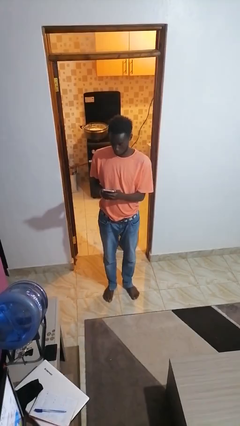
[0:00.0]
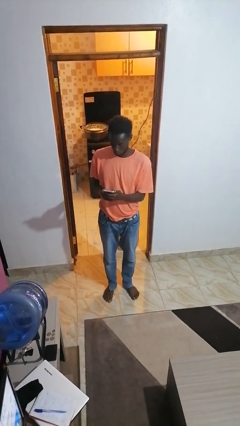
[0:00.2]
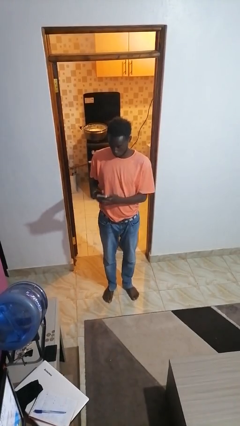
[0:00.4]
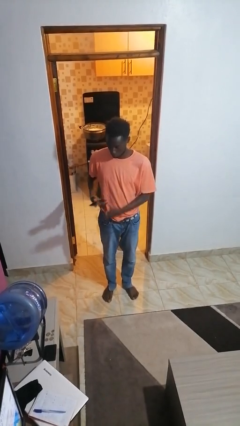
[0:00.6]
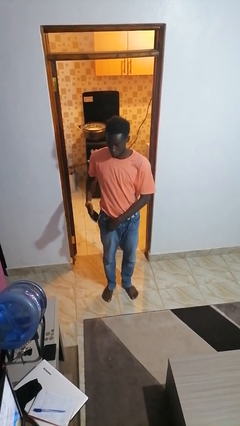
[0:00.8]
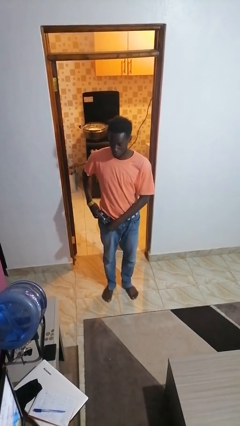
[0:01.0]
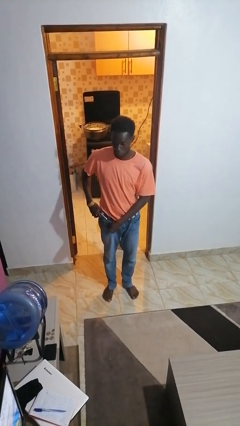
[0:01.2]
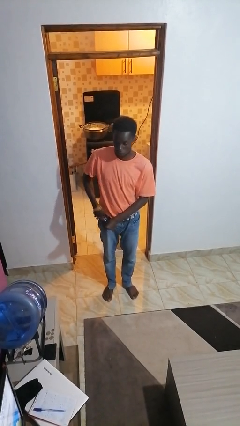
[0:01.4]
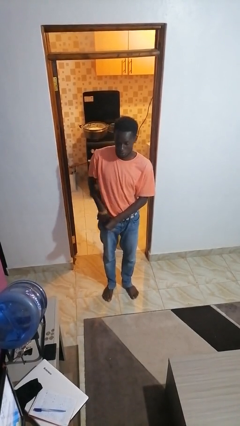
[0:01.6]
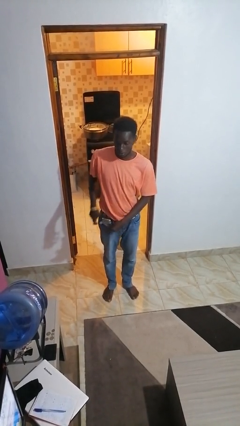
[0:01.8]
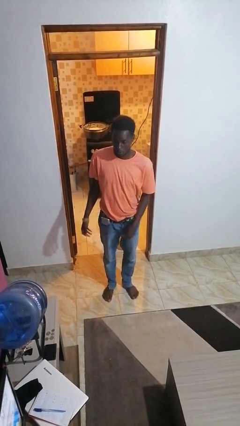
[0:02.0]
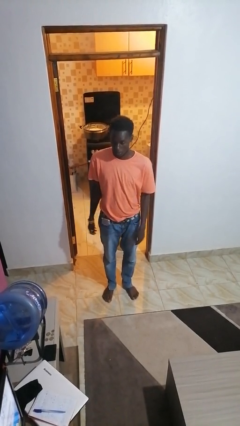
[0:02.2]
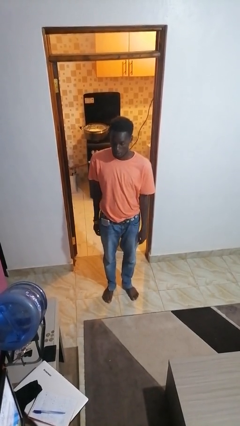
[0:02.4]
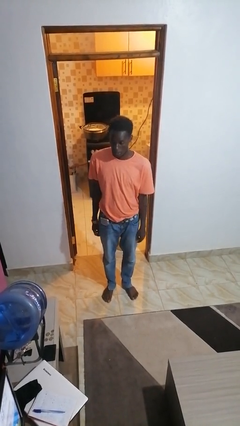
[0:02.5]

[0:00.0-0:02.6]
person puts phone into pocket

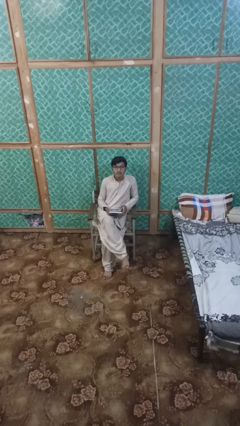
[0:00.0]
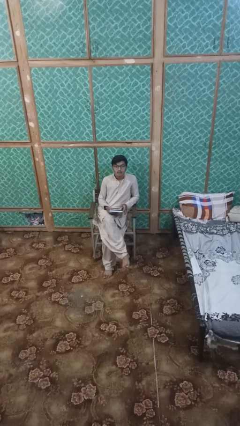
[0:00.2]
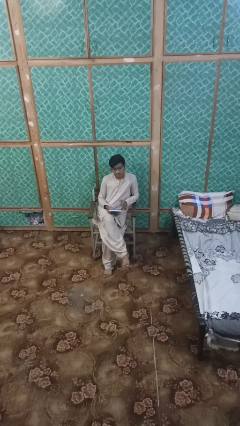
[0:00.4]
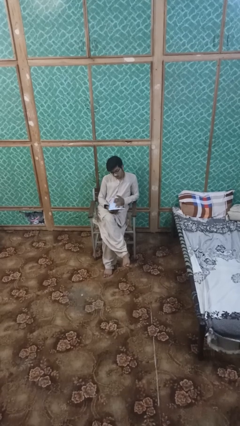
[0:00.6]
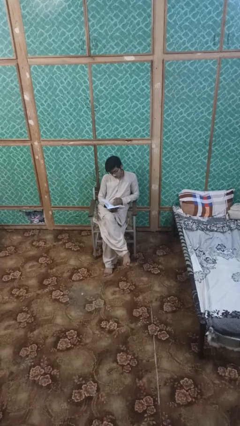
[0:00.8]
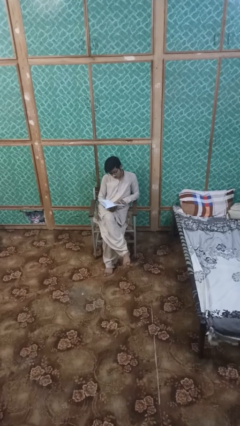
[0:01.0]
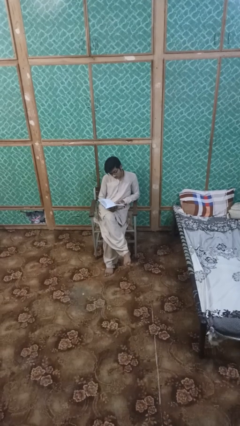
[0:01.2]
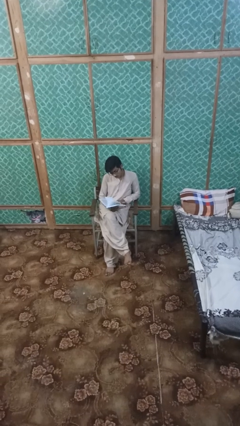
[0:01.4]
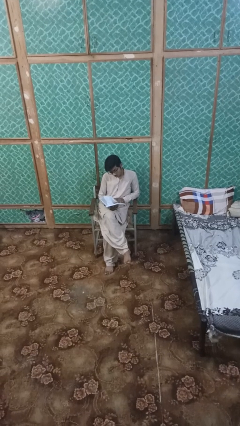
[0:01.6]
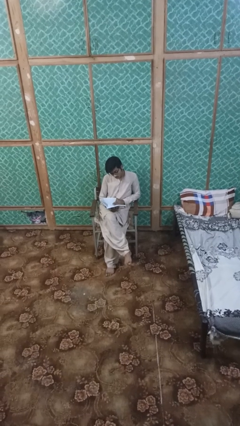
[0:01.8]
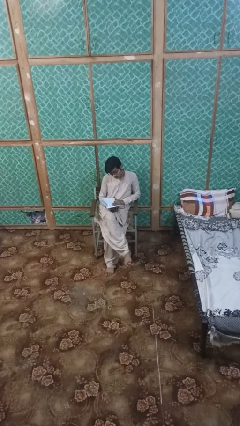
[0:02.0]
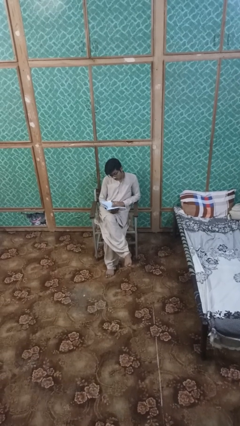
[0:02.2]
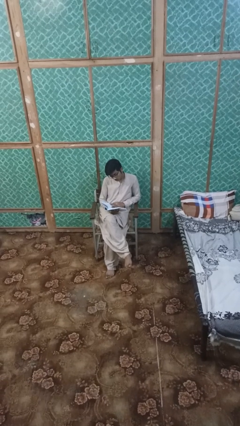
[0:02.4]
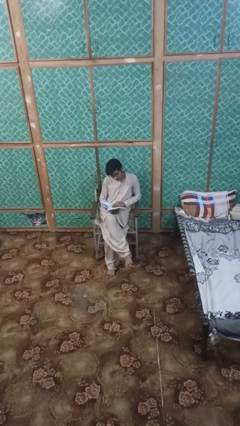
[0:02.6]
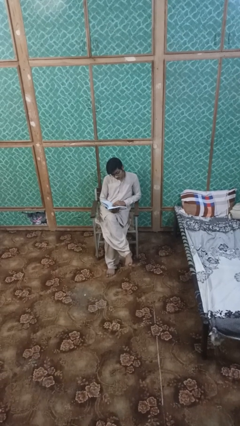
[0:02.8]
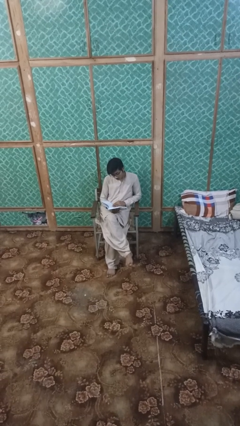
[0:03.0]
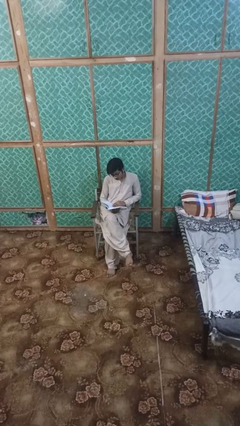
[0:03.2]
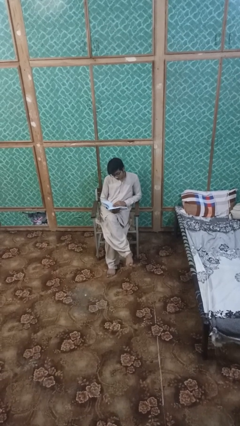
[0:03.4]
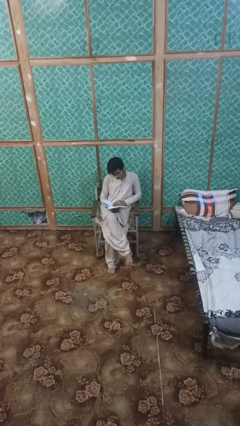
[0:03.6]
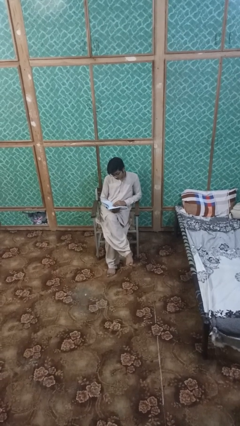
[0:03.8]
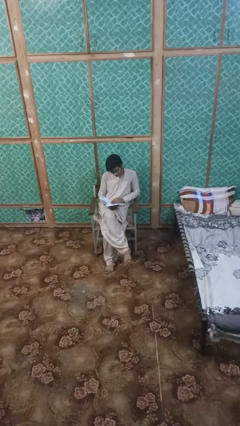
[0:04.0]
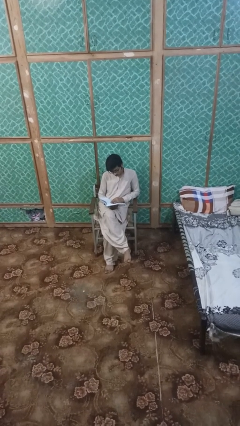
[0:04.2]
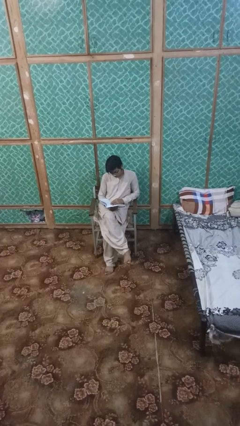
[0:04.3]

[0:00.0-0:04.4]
person reads magazine

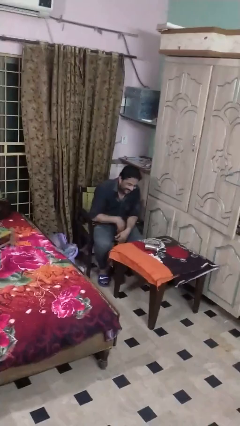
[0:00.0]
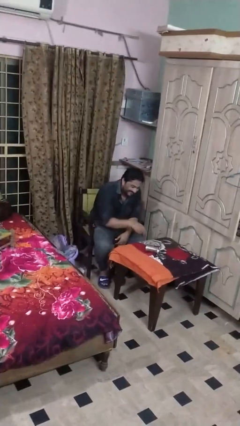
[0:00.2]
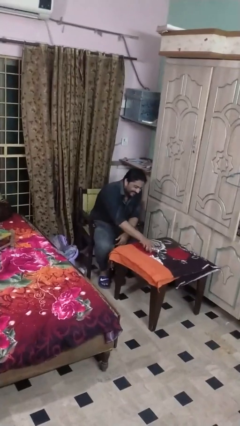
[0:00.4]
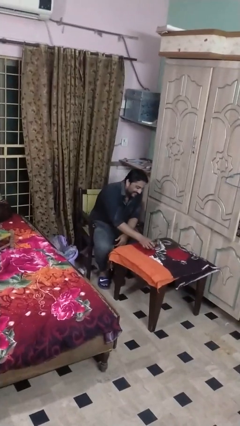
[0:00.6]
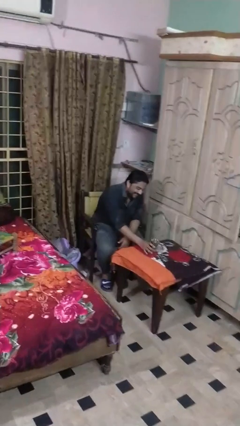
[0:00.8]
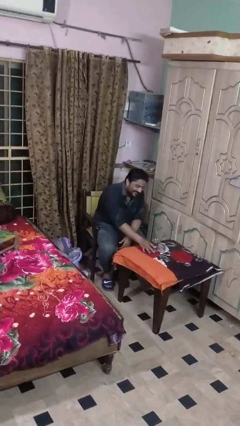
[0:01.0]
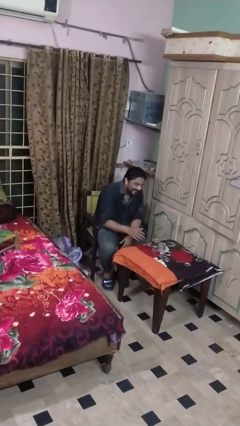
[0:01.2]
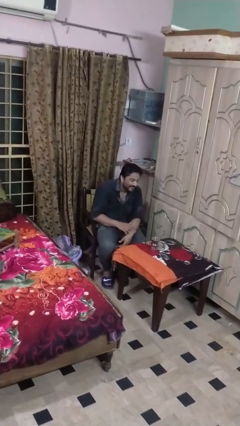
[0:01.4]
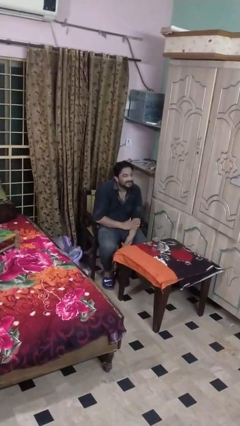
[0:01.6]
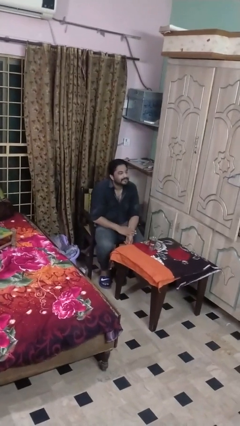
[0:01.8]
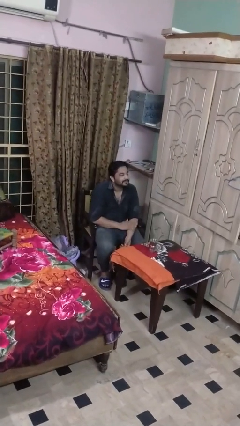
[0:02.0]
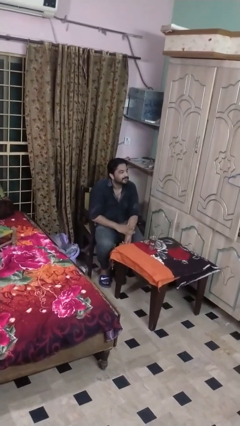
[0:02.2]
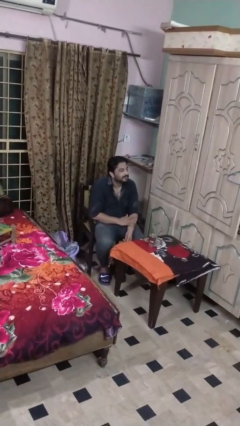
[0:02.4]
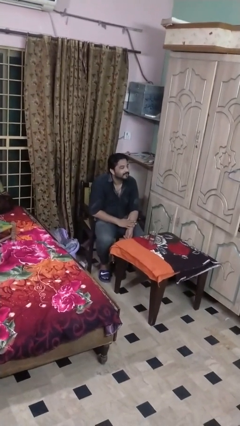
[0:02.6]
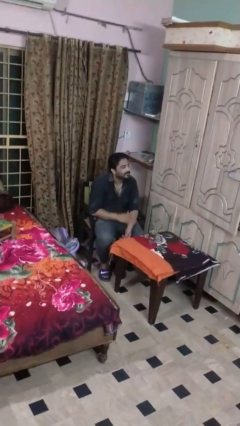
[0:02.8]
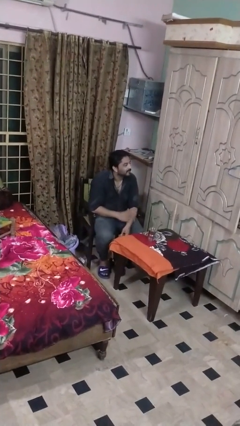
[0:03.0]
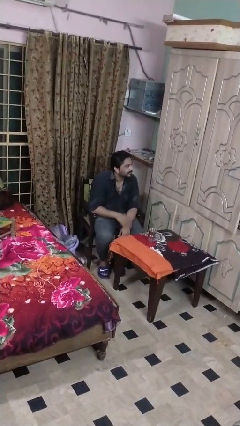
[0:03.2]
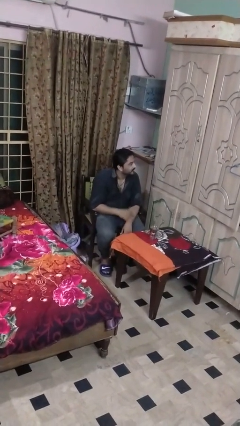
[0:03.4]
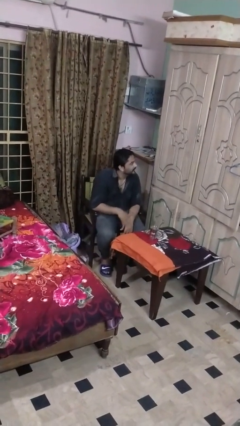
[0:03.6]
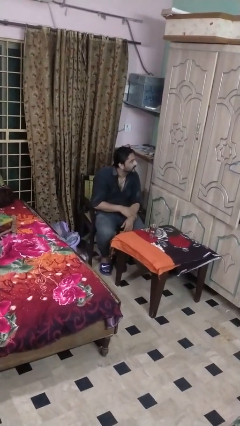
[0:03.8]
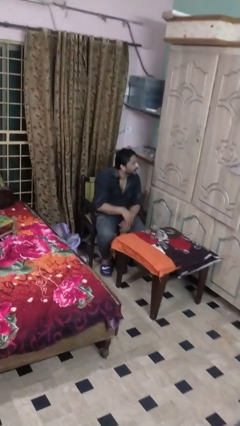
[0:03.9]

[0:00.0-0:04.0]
person sets upright glass

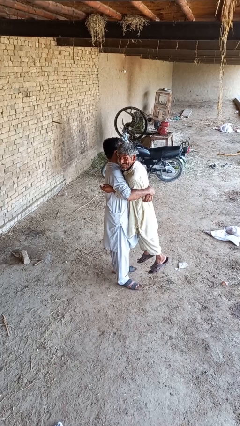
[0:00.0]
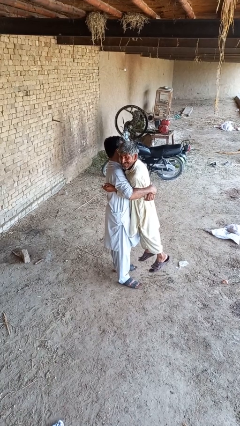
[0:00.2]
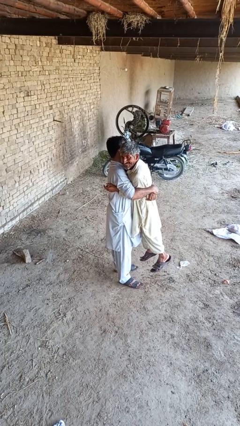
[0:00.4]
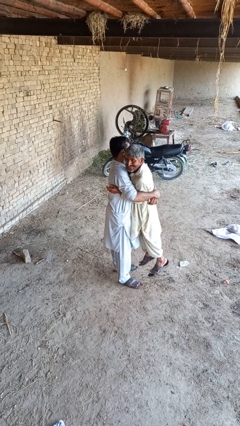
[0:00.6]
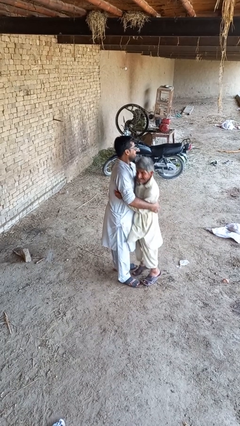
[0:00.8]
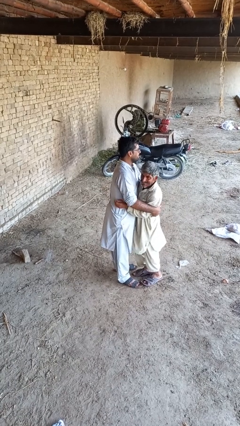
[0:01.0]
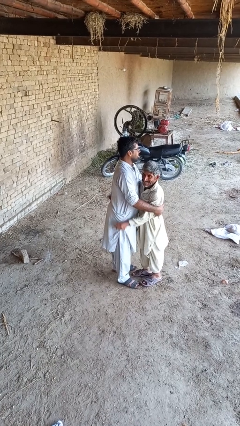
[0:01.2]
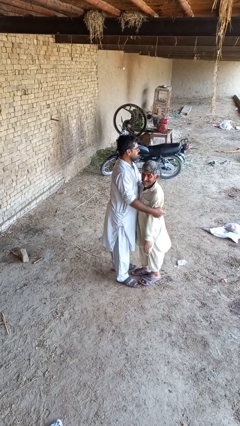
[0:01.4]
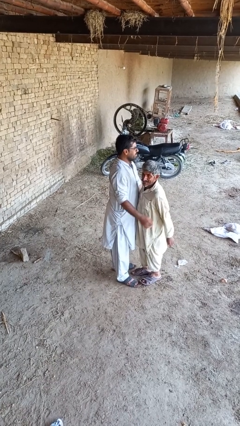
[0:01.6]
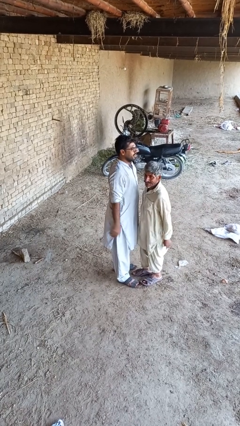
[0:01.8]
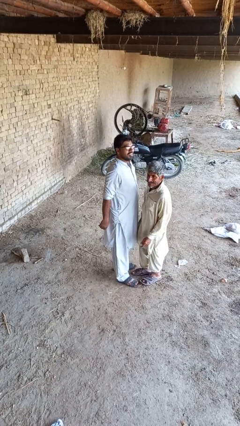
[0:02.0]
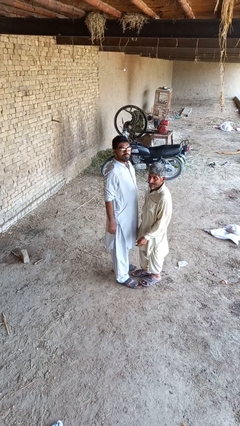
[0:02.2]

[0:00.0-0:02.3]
person puts down person

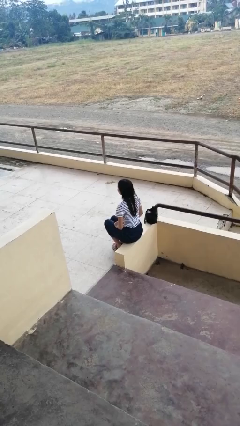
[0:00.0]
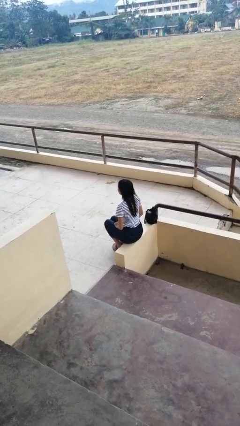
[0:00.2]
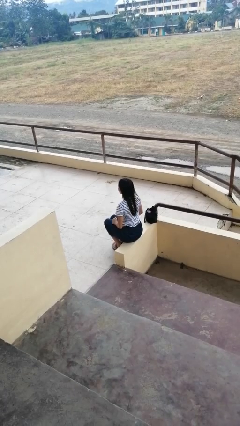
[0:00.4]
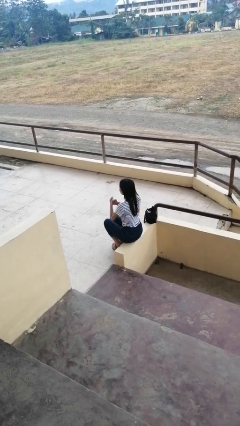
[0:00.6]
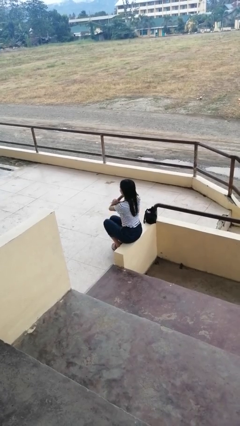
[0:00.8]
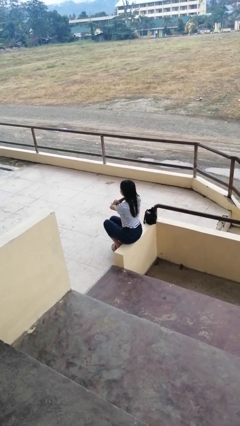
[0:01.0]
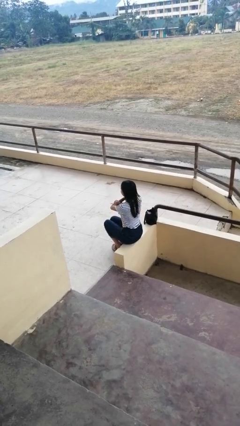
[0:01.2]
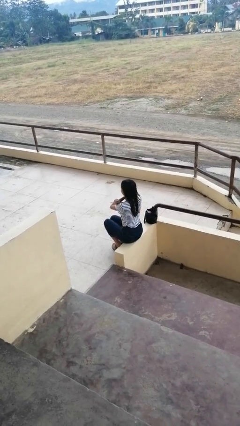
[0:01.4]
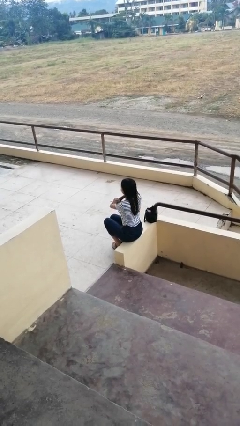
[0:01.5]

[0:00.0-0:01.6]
person gestures arms x

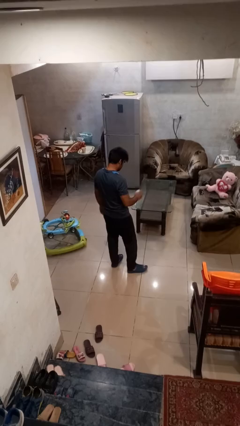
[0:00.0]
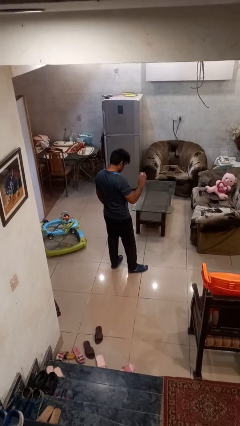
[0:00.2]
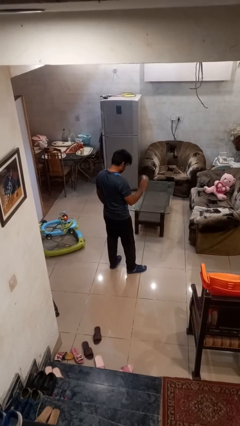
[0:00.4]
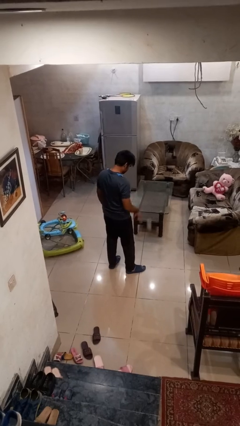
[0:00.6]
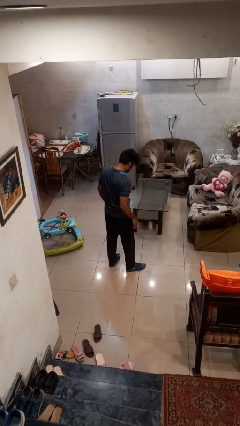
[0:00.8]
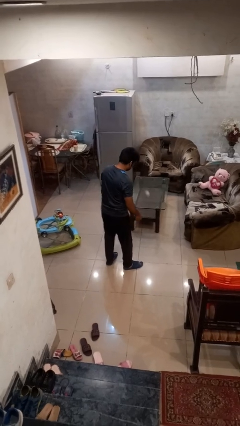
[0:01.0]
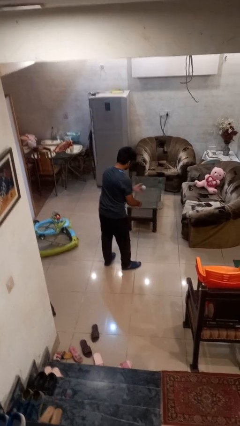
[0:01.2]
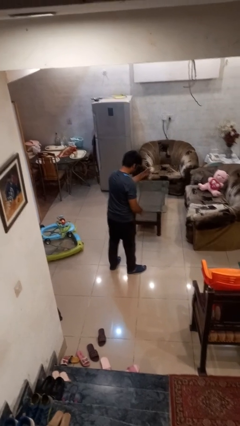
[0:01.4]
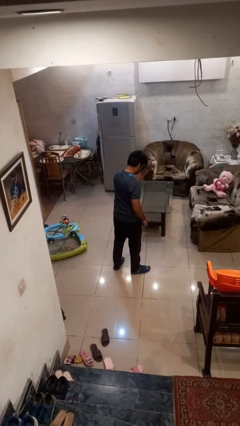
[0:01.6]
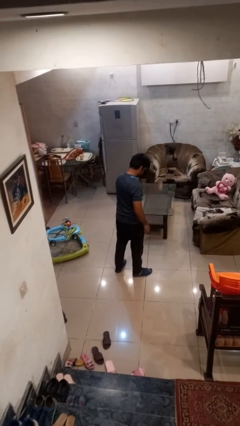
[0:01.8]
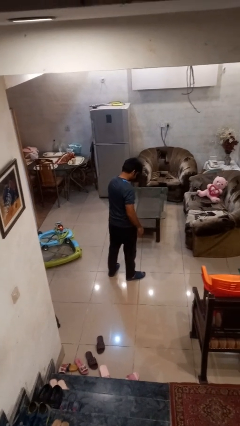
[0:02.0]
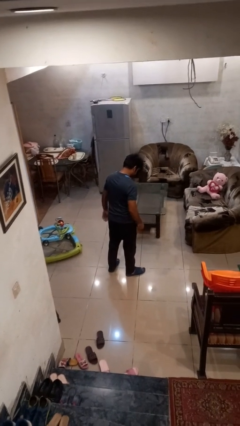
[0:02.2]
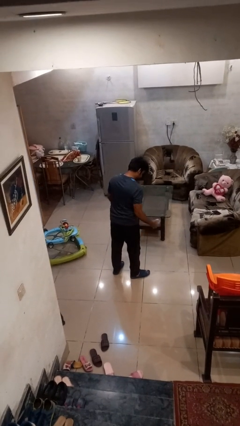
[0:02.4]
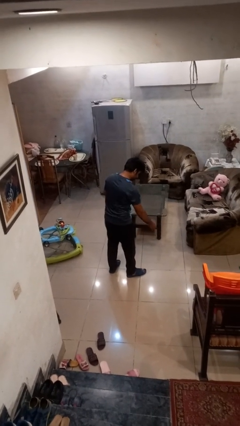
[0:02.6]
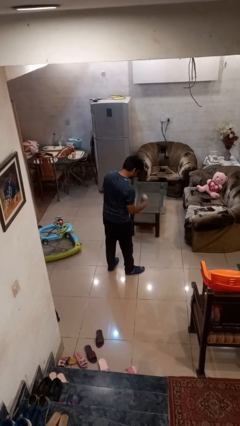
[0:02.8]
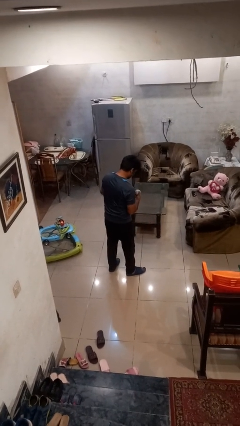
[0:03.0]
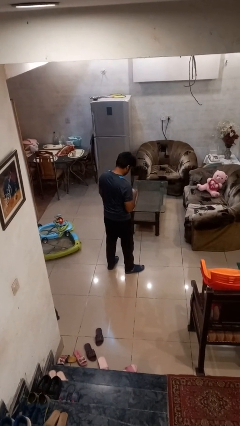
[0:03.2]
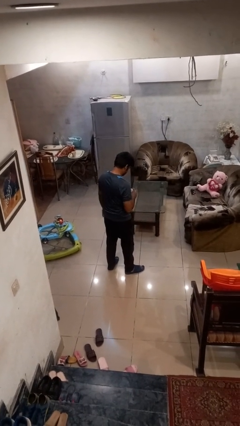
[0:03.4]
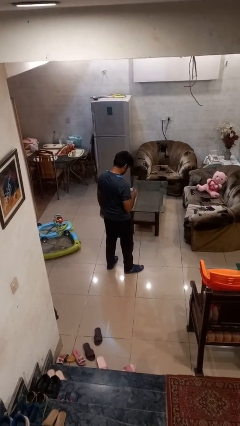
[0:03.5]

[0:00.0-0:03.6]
person bounces ball on floor
